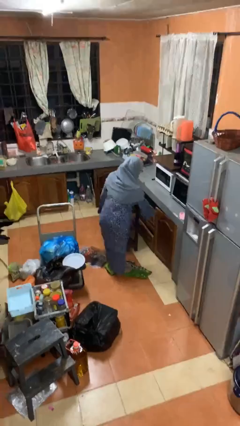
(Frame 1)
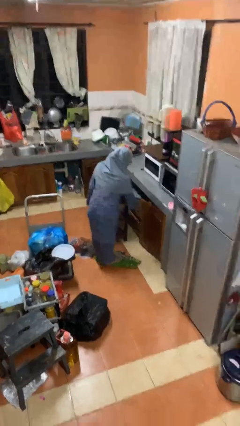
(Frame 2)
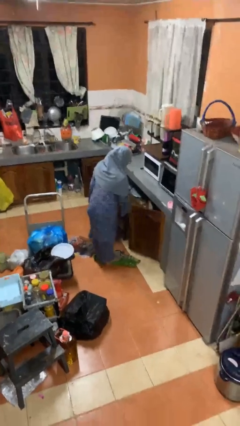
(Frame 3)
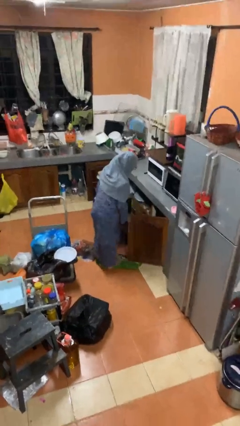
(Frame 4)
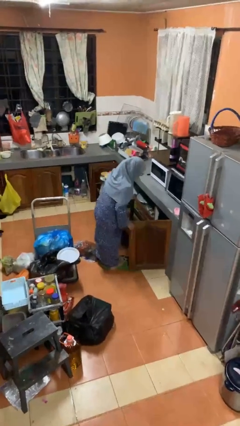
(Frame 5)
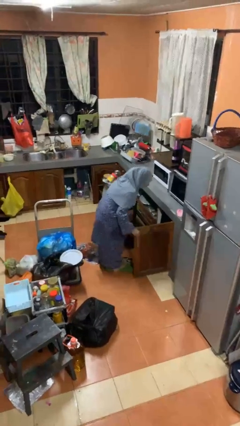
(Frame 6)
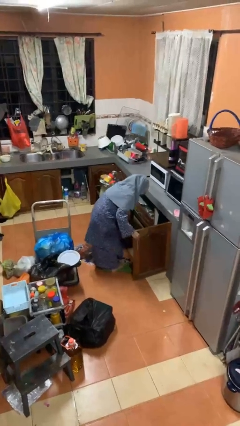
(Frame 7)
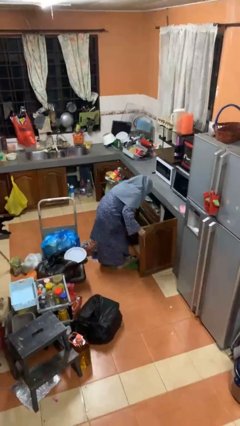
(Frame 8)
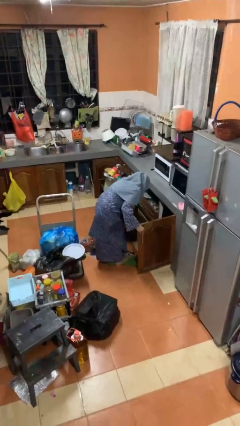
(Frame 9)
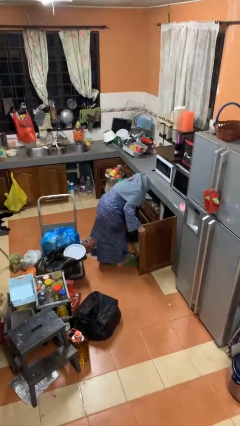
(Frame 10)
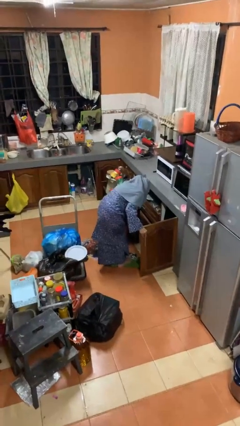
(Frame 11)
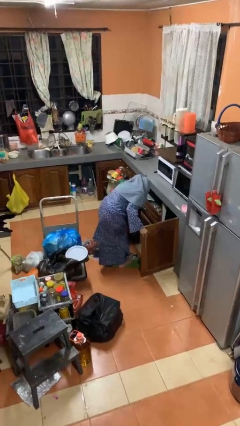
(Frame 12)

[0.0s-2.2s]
person opens cabinet

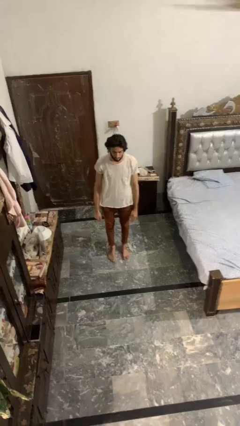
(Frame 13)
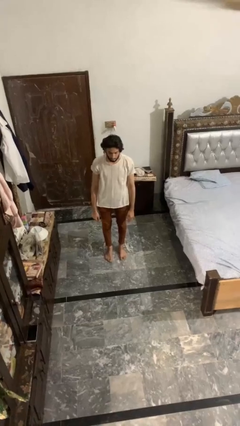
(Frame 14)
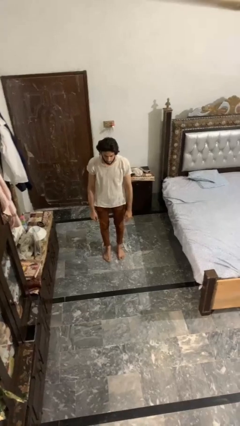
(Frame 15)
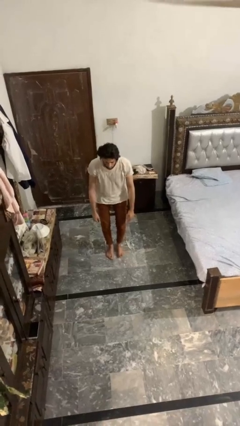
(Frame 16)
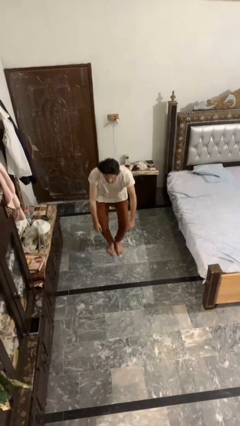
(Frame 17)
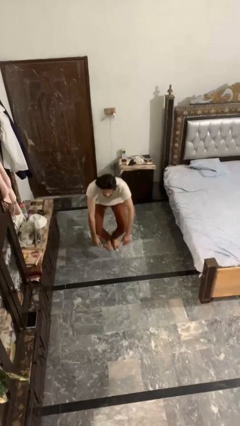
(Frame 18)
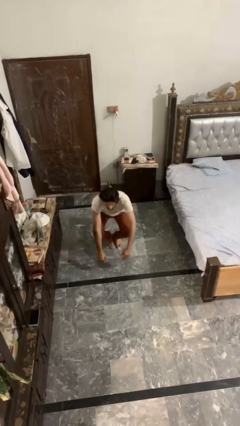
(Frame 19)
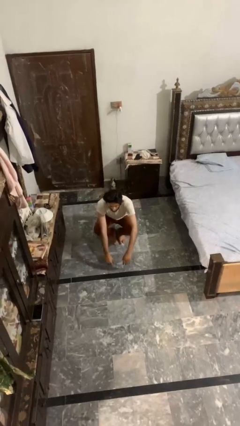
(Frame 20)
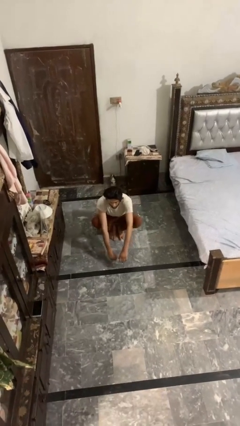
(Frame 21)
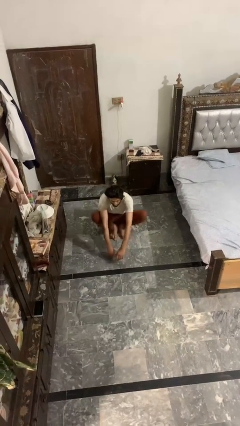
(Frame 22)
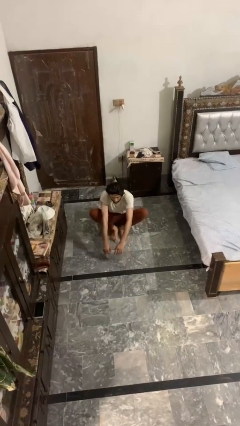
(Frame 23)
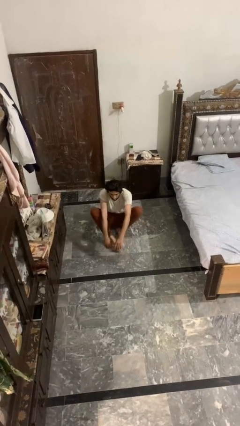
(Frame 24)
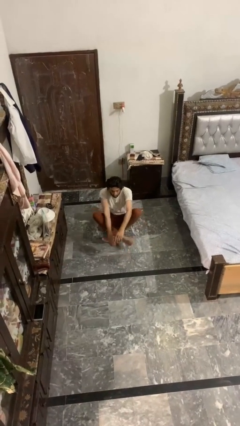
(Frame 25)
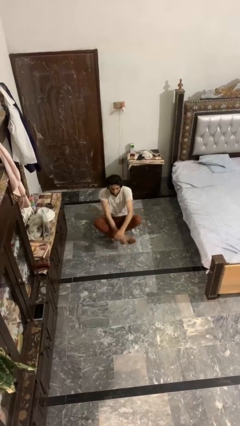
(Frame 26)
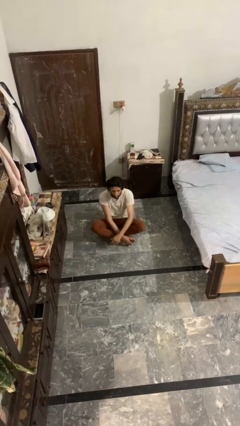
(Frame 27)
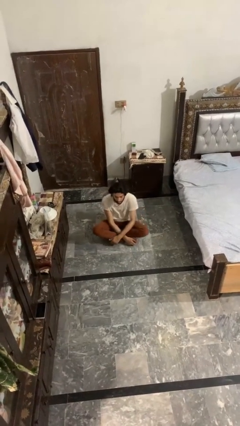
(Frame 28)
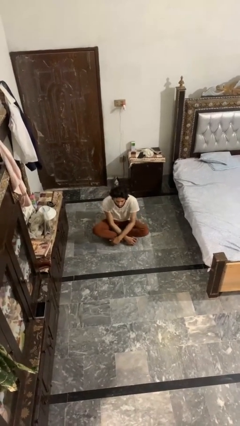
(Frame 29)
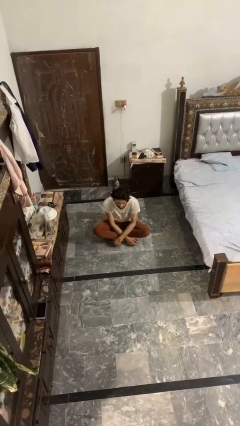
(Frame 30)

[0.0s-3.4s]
person sits crisscross

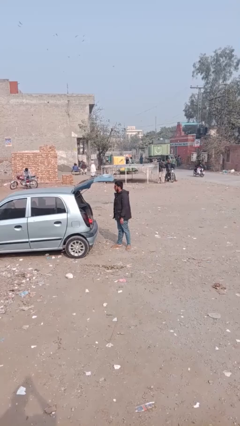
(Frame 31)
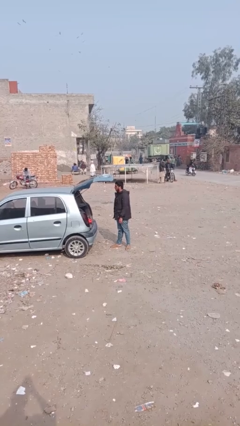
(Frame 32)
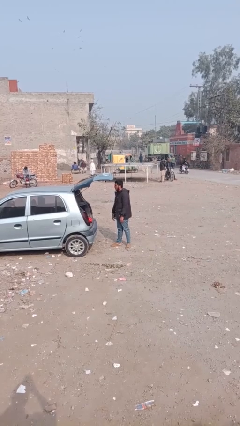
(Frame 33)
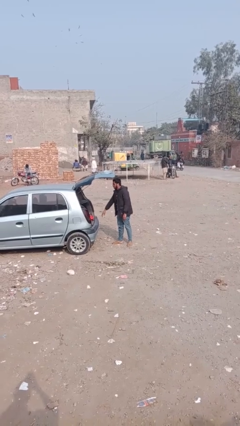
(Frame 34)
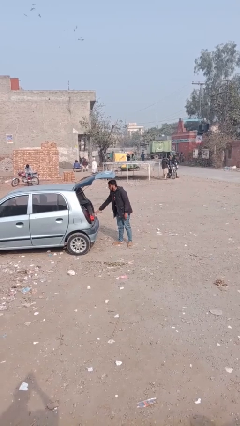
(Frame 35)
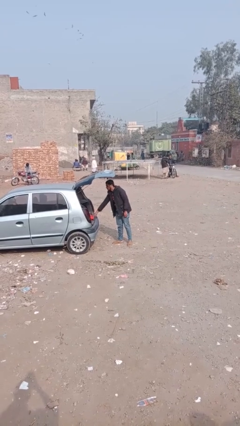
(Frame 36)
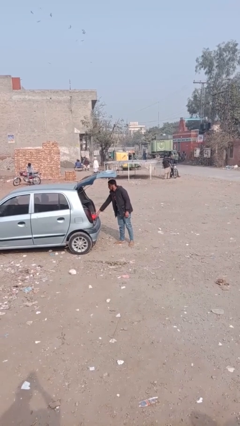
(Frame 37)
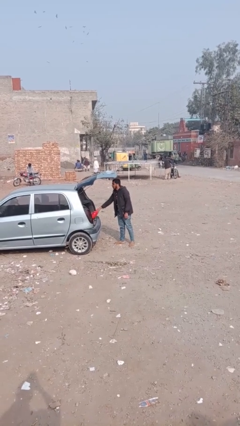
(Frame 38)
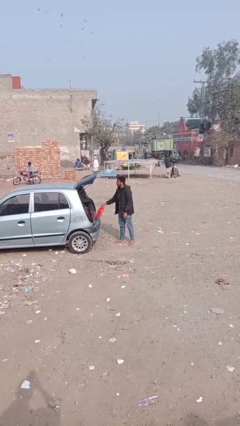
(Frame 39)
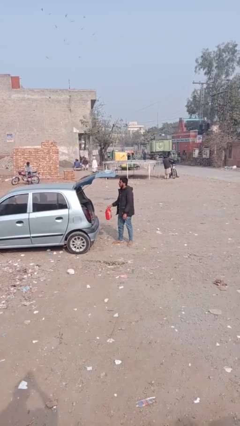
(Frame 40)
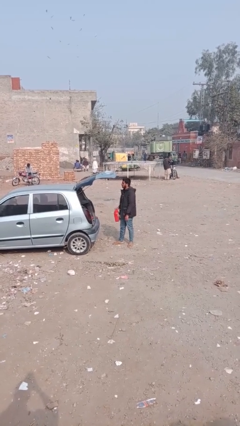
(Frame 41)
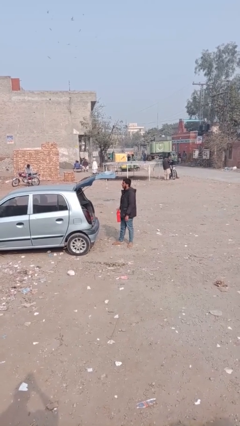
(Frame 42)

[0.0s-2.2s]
person unloads car

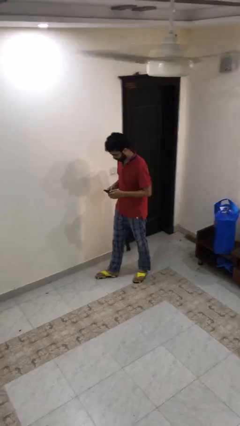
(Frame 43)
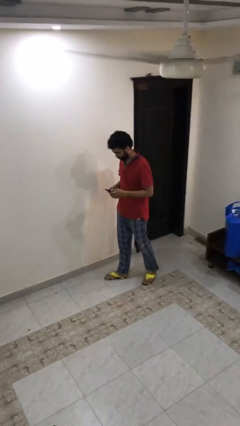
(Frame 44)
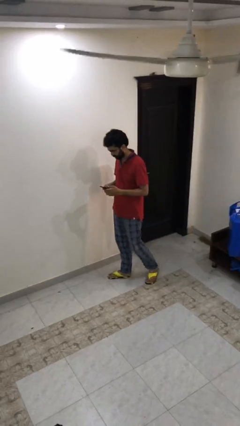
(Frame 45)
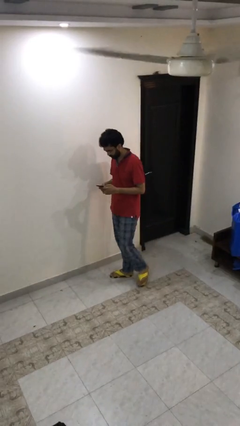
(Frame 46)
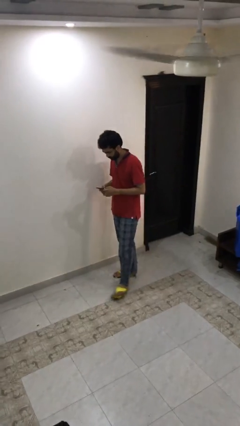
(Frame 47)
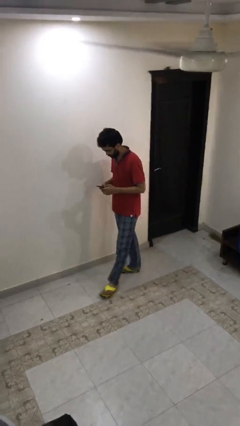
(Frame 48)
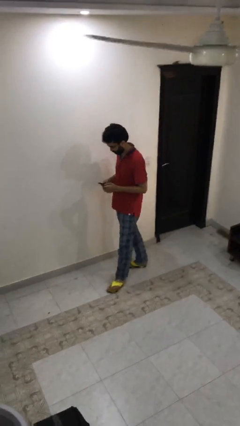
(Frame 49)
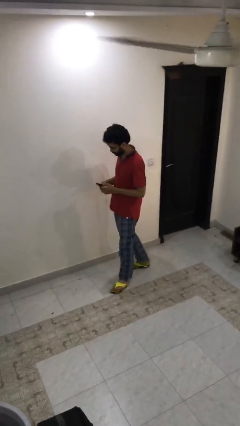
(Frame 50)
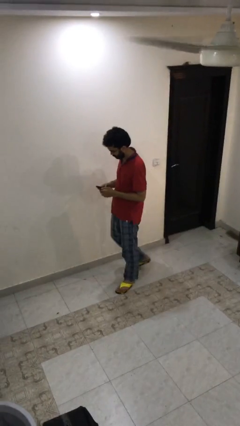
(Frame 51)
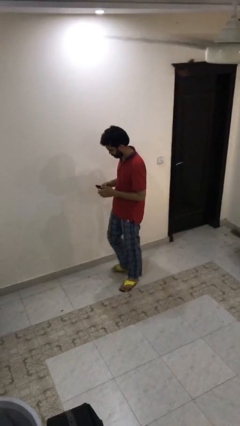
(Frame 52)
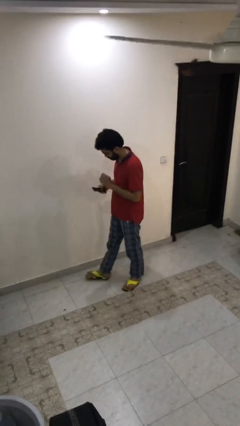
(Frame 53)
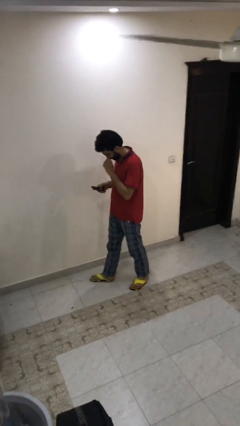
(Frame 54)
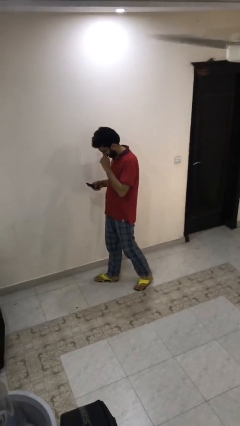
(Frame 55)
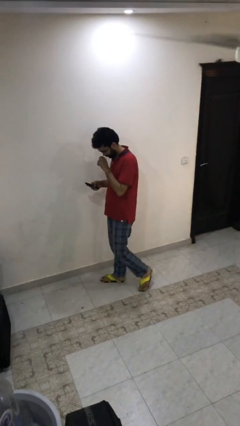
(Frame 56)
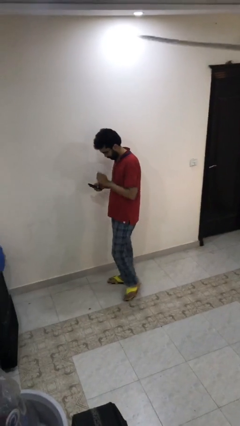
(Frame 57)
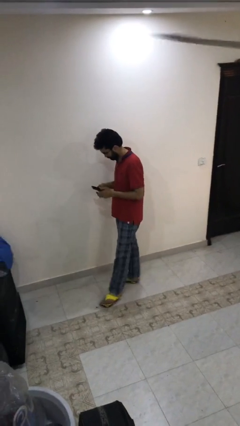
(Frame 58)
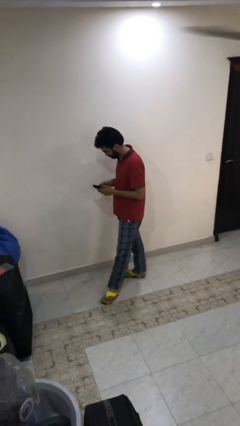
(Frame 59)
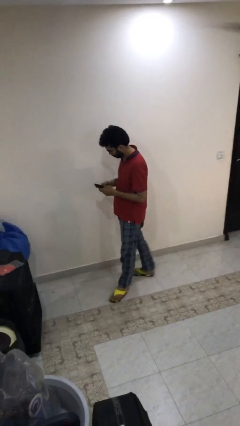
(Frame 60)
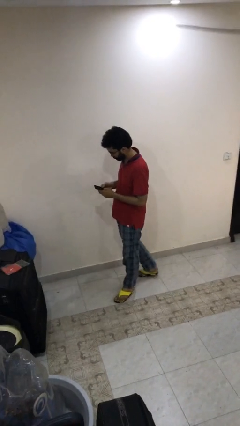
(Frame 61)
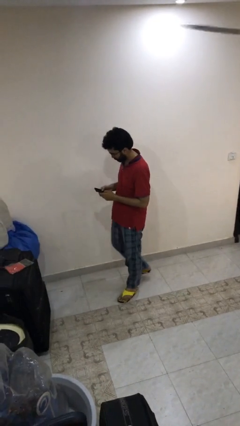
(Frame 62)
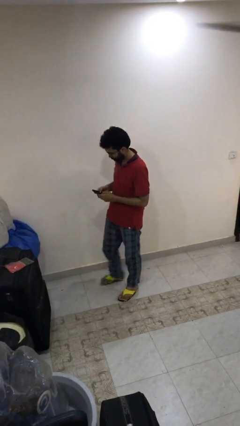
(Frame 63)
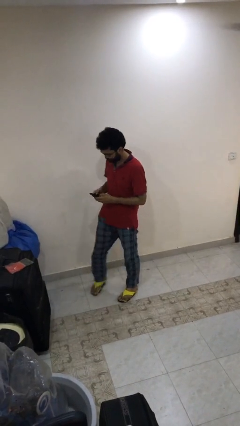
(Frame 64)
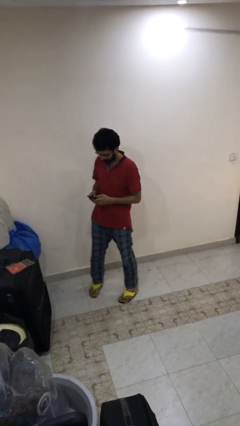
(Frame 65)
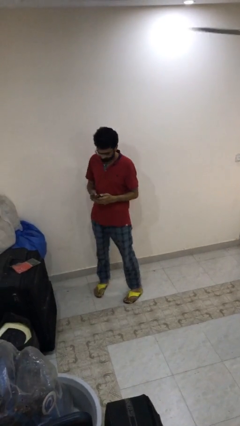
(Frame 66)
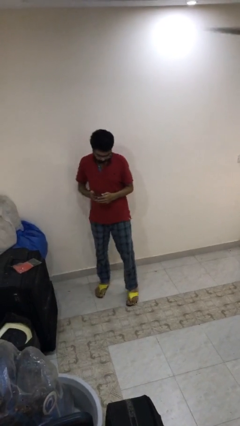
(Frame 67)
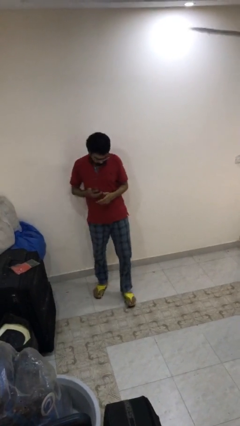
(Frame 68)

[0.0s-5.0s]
person texts on phone

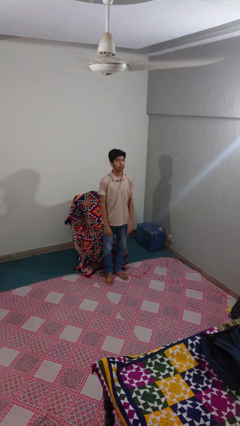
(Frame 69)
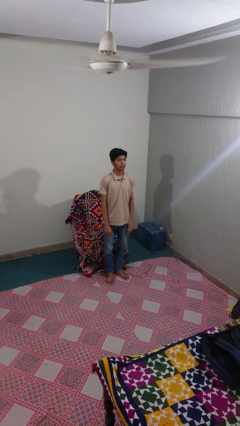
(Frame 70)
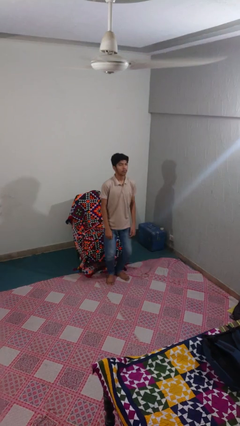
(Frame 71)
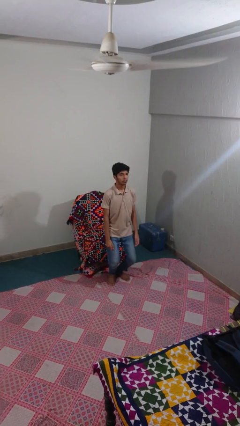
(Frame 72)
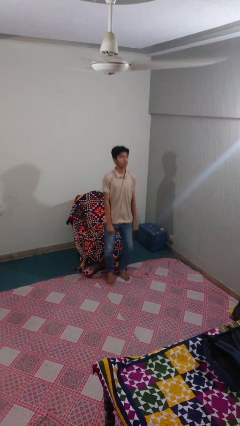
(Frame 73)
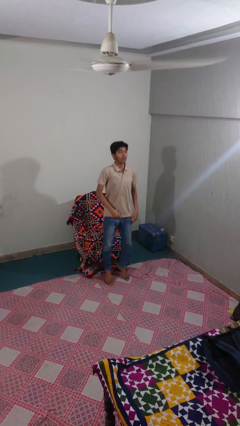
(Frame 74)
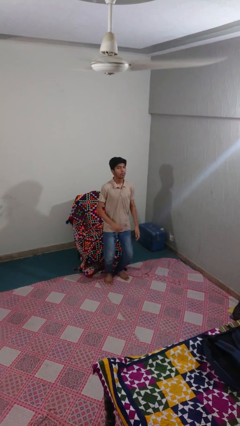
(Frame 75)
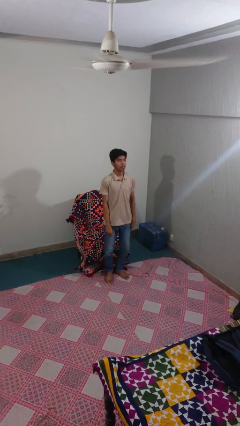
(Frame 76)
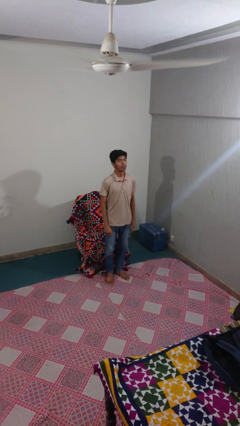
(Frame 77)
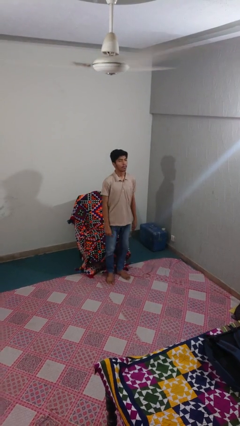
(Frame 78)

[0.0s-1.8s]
person jumps

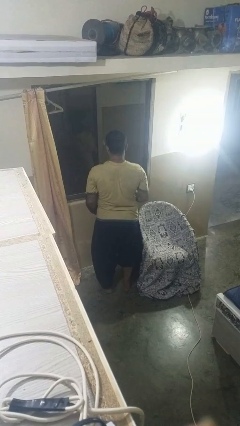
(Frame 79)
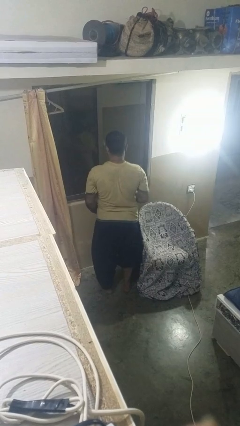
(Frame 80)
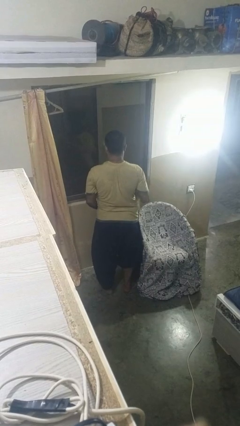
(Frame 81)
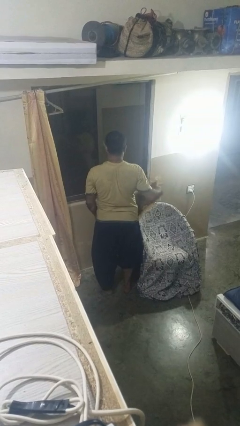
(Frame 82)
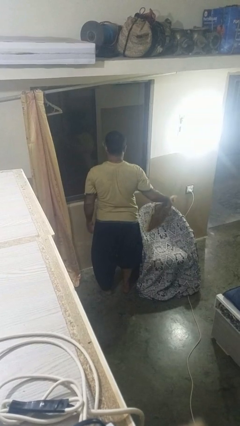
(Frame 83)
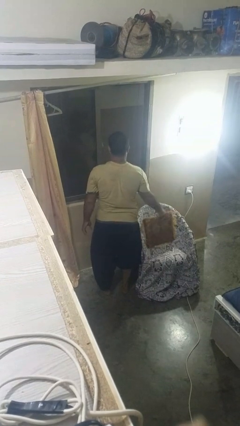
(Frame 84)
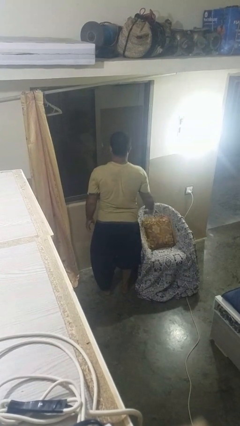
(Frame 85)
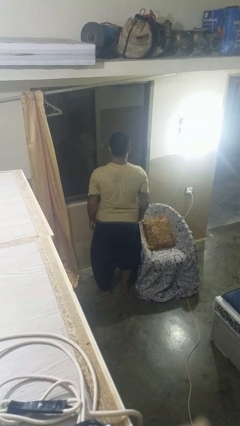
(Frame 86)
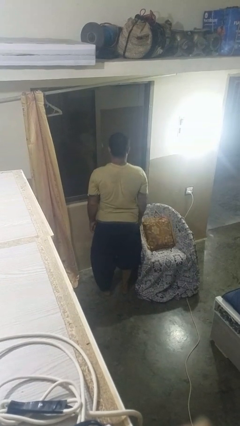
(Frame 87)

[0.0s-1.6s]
person puts down object on couch

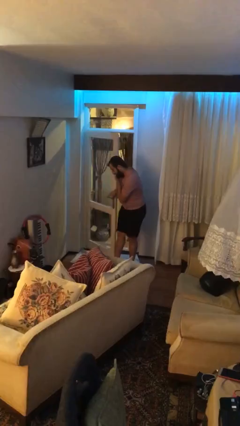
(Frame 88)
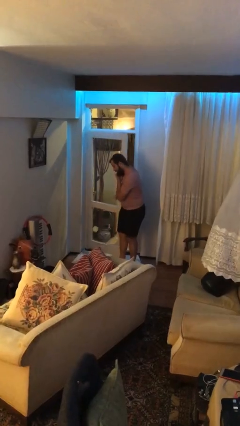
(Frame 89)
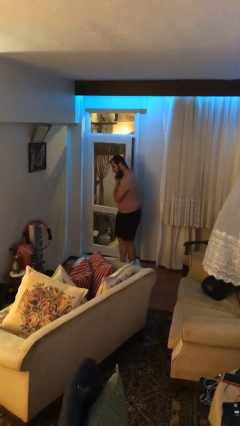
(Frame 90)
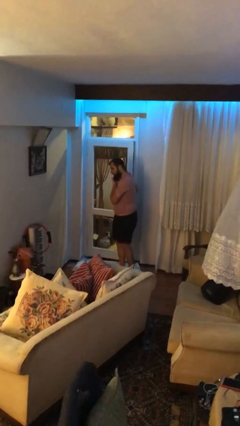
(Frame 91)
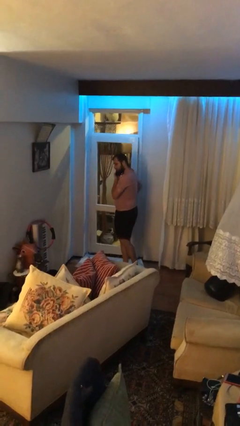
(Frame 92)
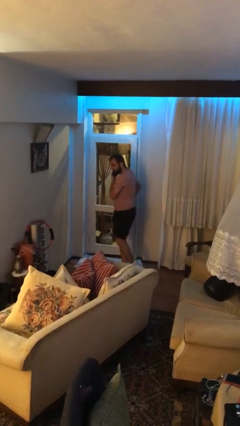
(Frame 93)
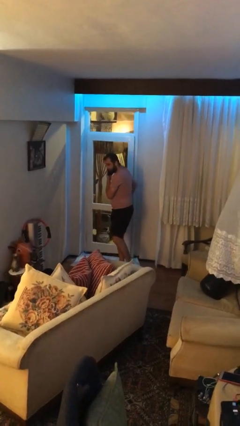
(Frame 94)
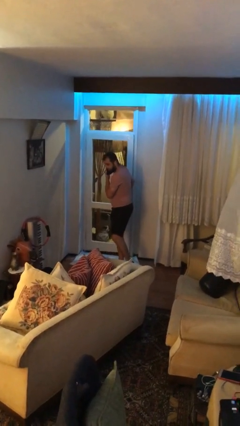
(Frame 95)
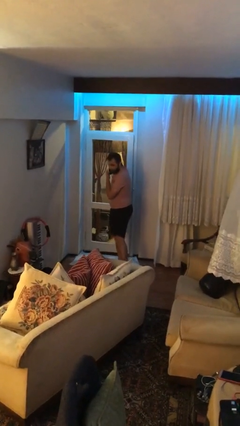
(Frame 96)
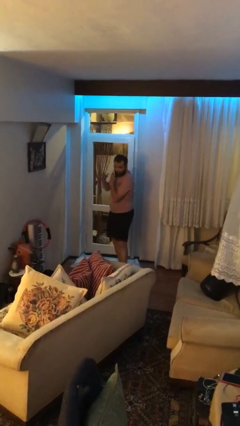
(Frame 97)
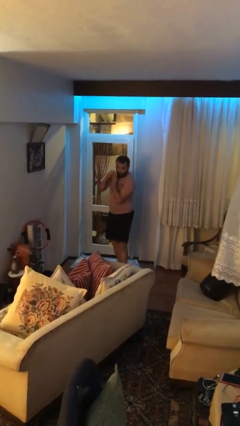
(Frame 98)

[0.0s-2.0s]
person closes facility door
